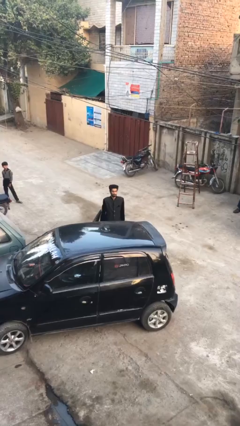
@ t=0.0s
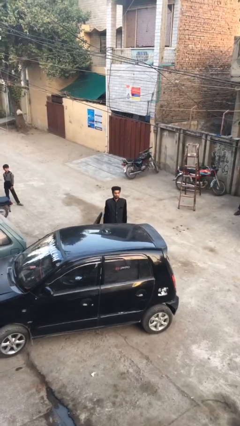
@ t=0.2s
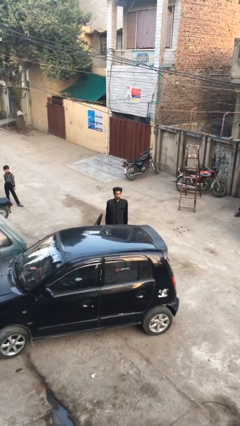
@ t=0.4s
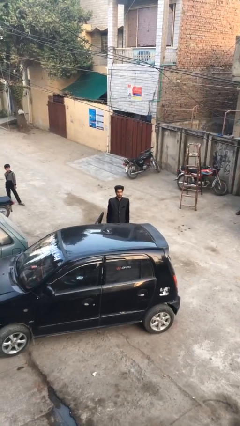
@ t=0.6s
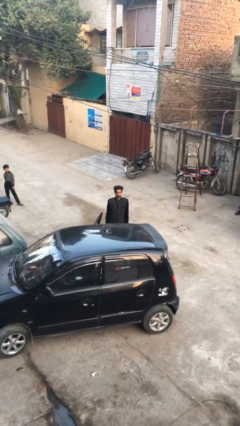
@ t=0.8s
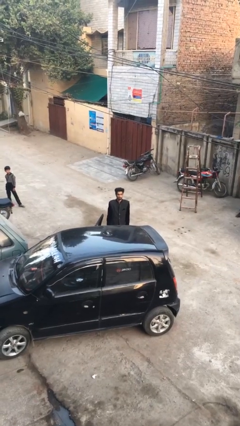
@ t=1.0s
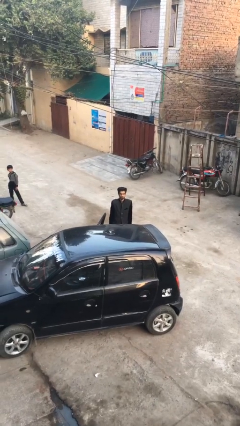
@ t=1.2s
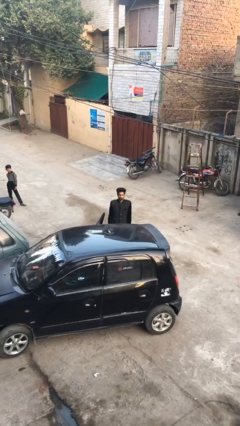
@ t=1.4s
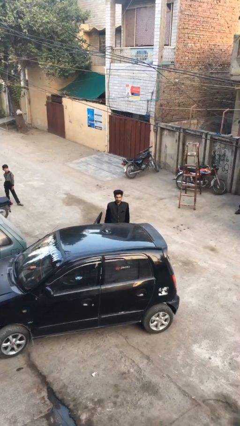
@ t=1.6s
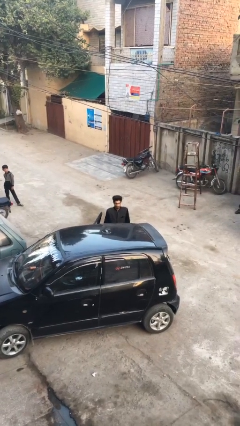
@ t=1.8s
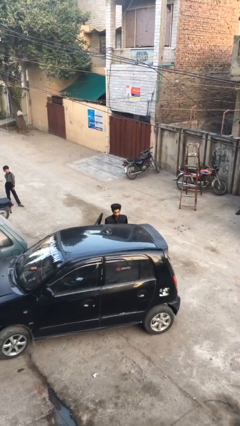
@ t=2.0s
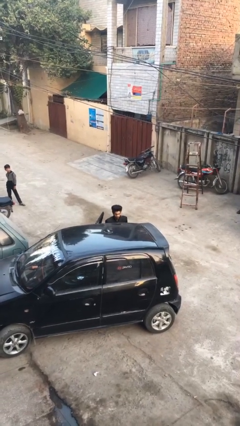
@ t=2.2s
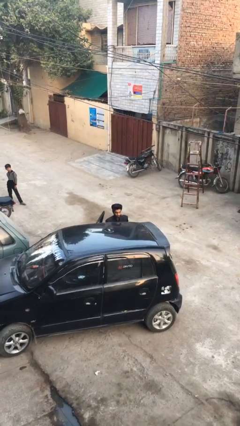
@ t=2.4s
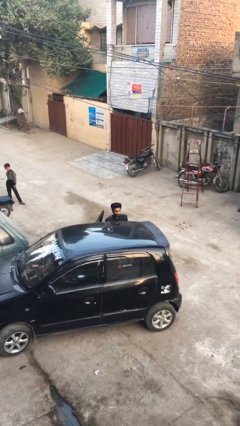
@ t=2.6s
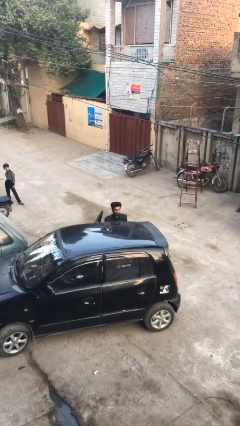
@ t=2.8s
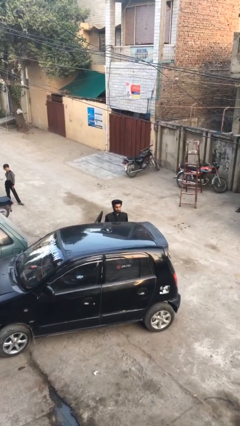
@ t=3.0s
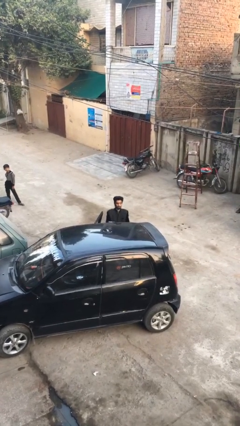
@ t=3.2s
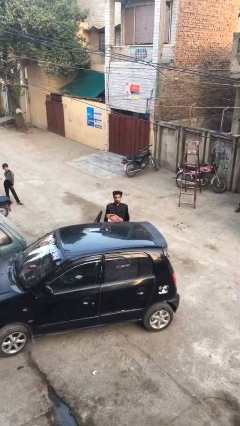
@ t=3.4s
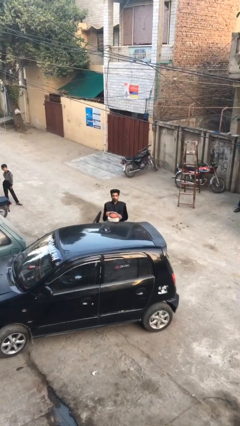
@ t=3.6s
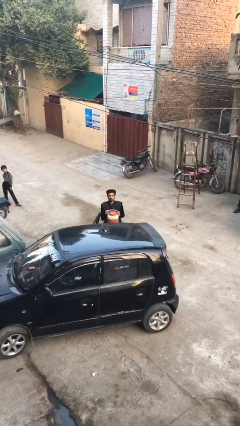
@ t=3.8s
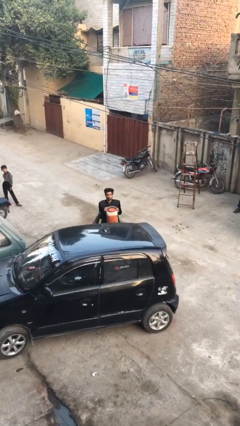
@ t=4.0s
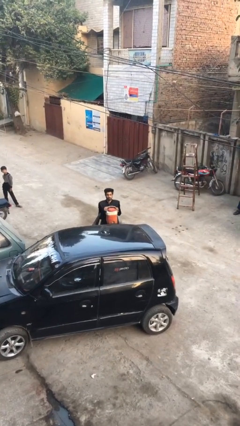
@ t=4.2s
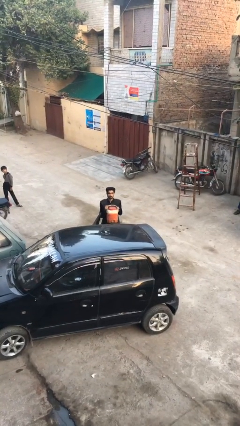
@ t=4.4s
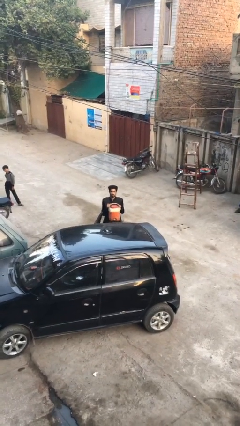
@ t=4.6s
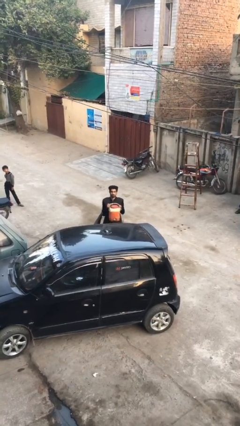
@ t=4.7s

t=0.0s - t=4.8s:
person unloads car

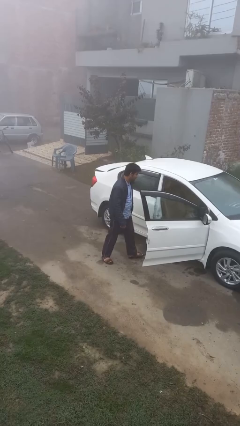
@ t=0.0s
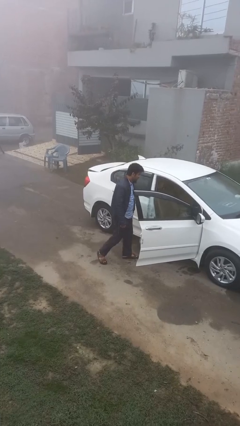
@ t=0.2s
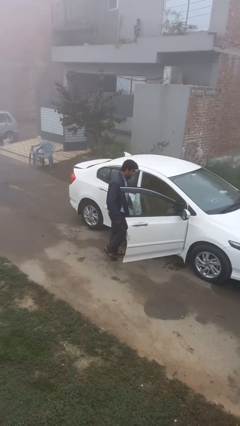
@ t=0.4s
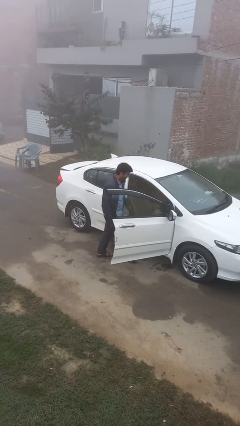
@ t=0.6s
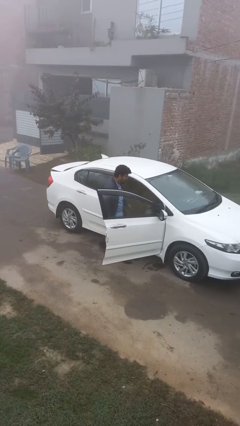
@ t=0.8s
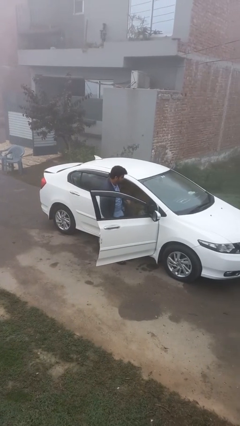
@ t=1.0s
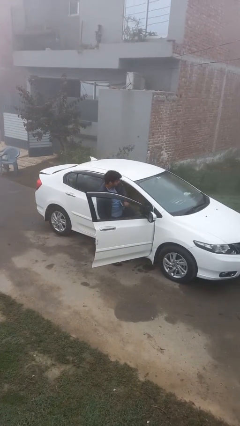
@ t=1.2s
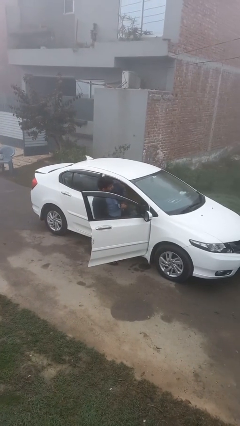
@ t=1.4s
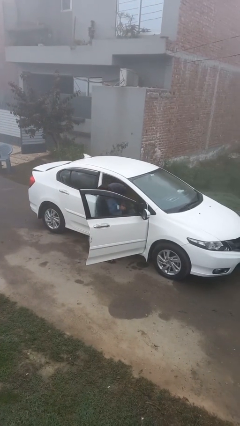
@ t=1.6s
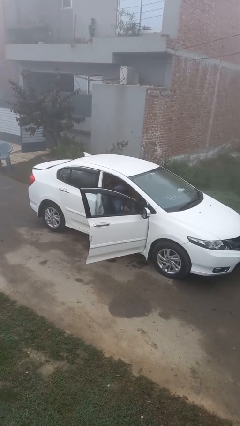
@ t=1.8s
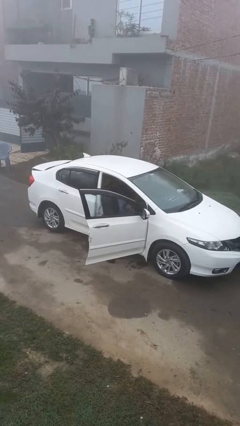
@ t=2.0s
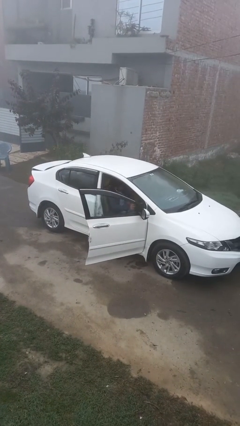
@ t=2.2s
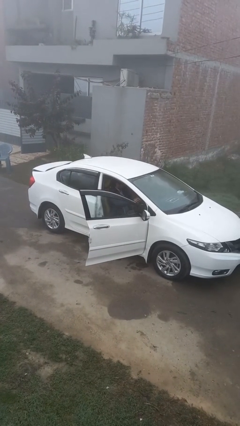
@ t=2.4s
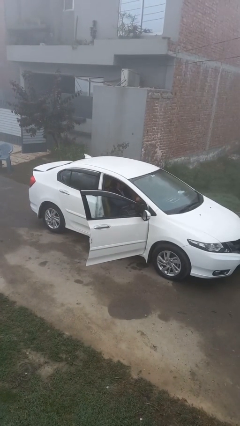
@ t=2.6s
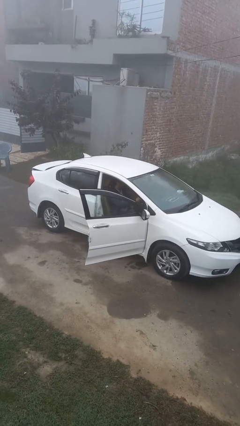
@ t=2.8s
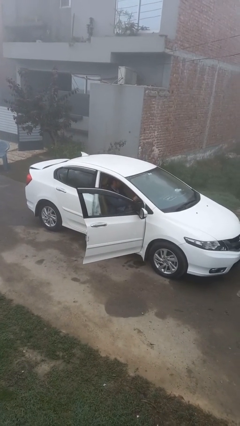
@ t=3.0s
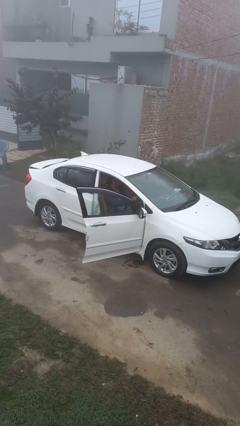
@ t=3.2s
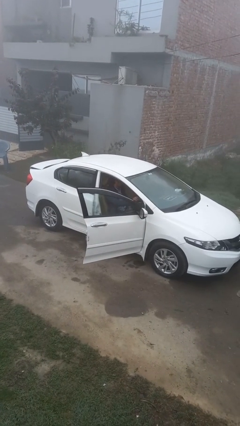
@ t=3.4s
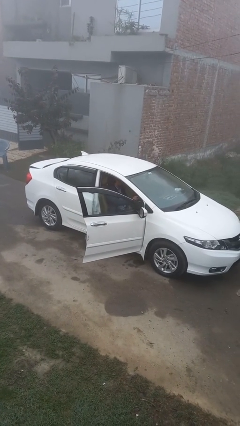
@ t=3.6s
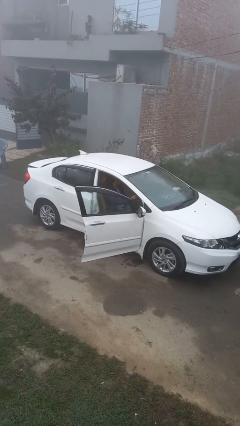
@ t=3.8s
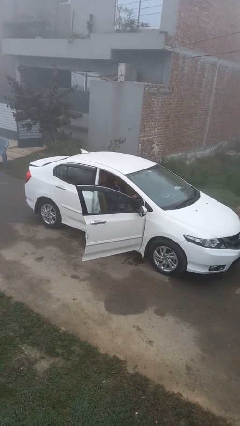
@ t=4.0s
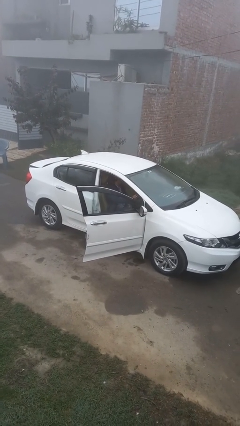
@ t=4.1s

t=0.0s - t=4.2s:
person enters car

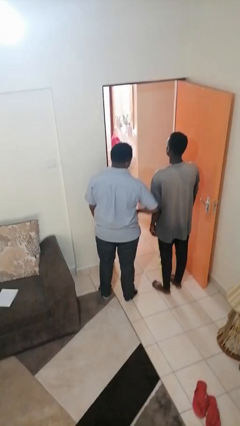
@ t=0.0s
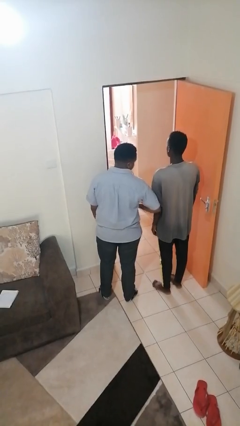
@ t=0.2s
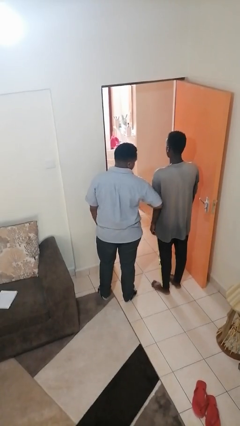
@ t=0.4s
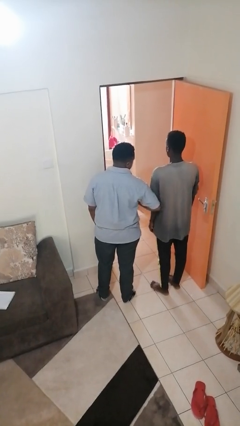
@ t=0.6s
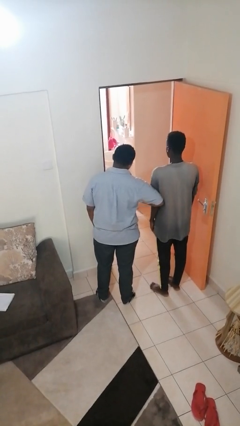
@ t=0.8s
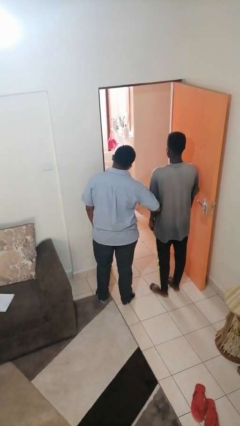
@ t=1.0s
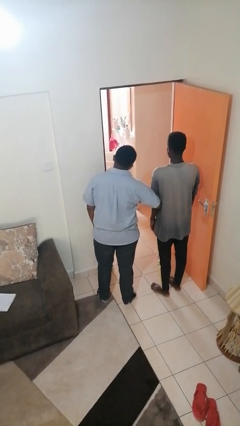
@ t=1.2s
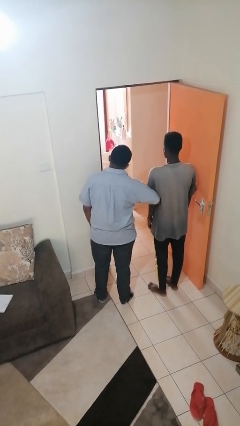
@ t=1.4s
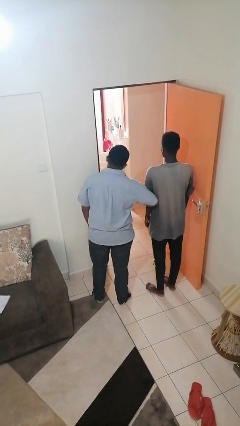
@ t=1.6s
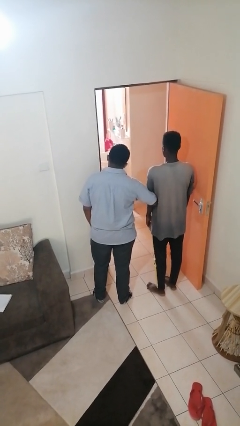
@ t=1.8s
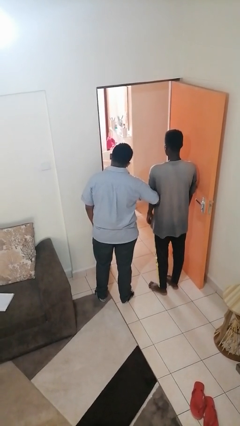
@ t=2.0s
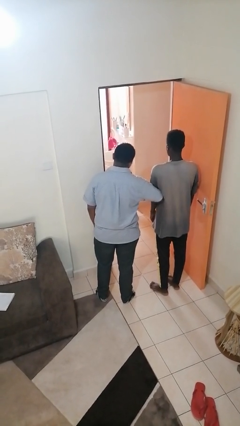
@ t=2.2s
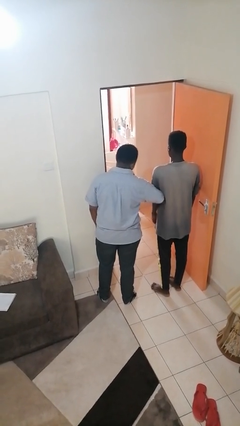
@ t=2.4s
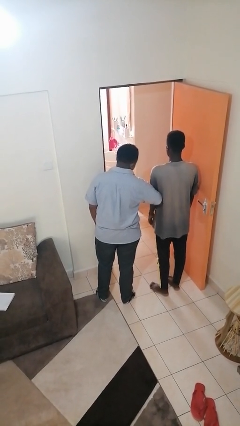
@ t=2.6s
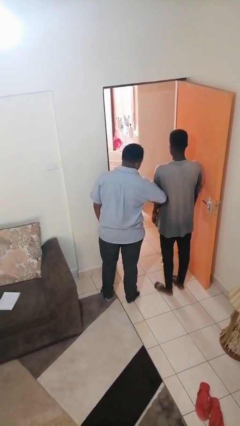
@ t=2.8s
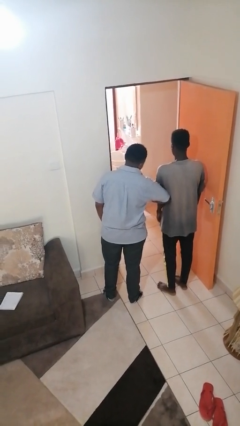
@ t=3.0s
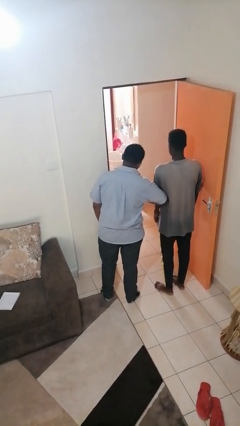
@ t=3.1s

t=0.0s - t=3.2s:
person nudges person with elbow

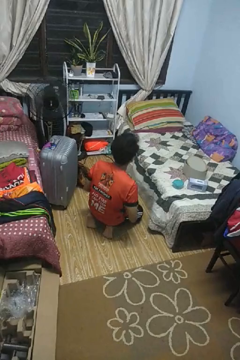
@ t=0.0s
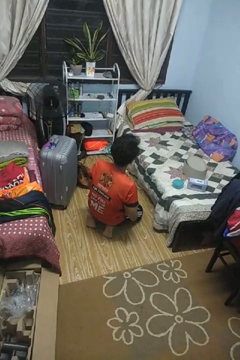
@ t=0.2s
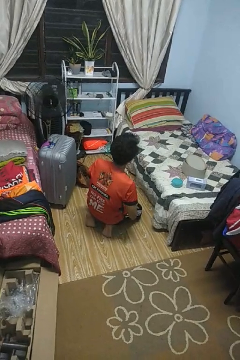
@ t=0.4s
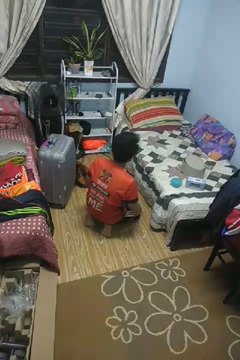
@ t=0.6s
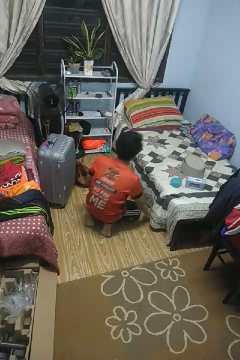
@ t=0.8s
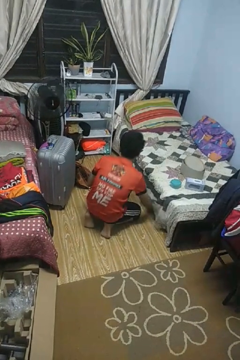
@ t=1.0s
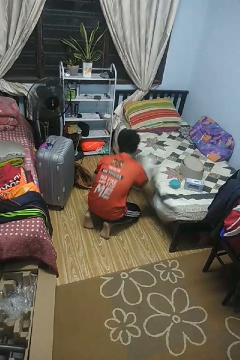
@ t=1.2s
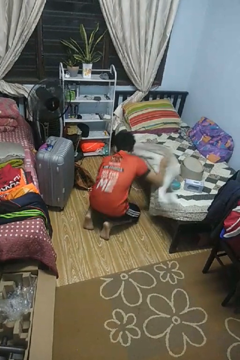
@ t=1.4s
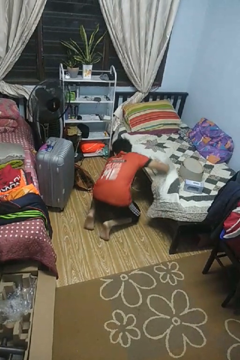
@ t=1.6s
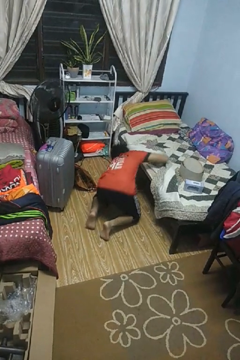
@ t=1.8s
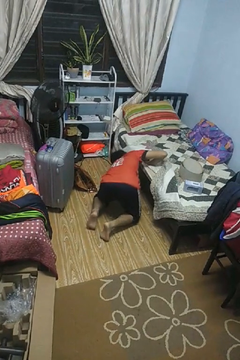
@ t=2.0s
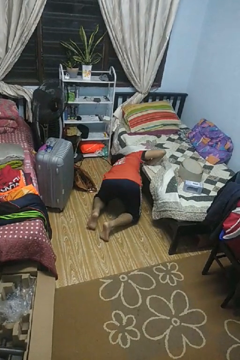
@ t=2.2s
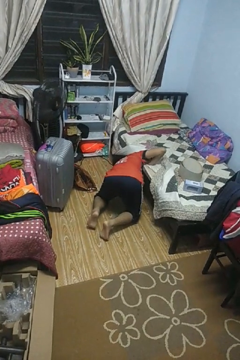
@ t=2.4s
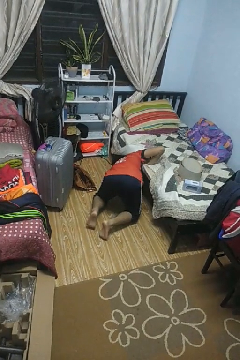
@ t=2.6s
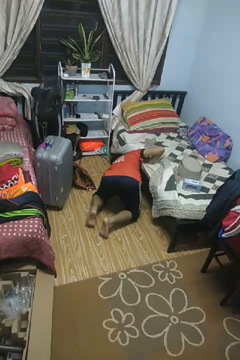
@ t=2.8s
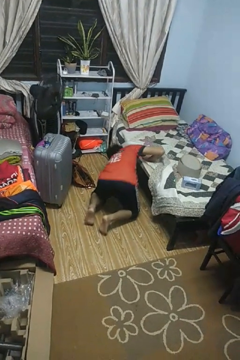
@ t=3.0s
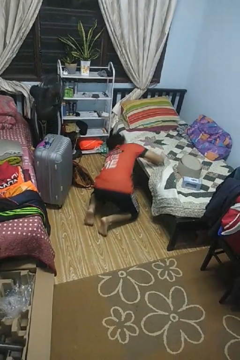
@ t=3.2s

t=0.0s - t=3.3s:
person searches under bed

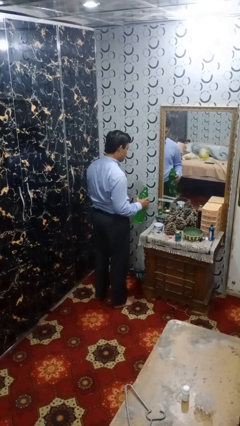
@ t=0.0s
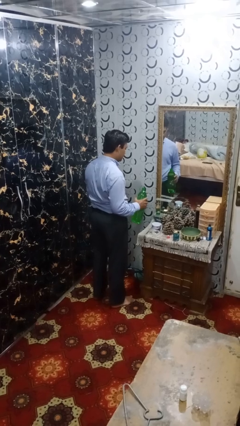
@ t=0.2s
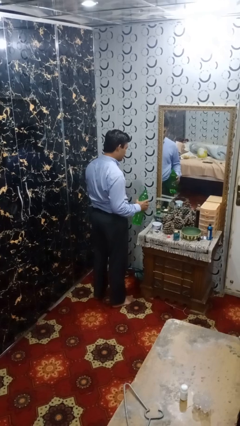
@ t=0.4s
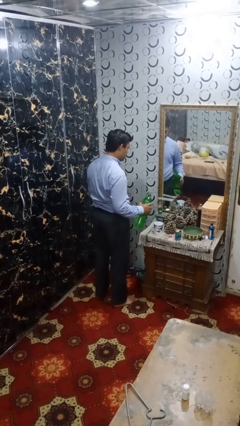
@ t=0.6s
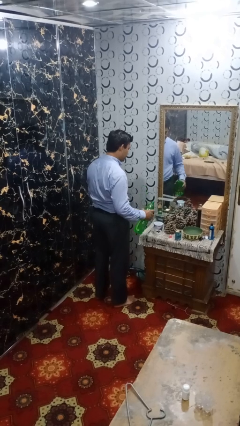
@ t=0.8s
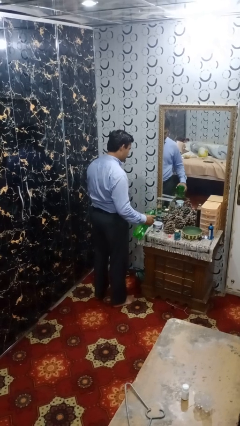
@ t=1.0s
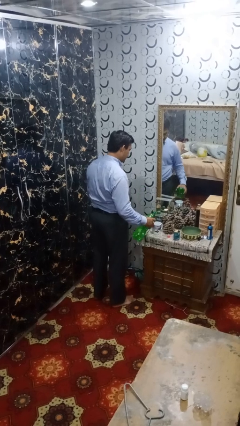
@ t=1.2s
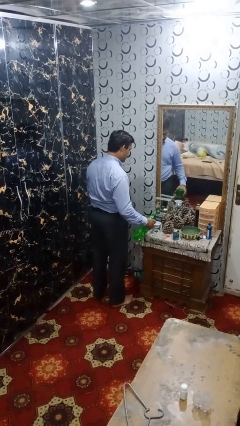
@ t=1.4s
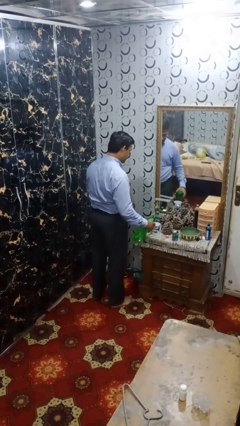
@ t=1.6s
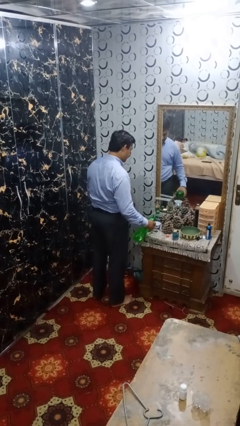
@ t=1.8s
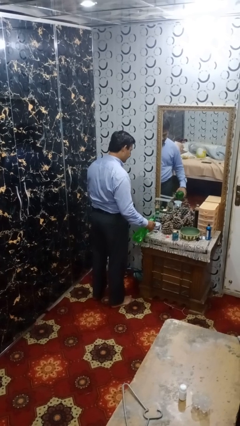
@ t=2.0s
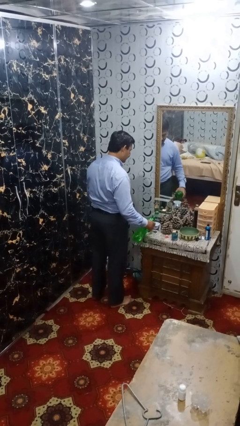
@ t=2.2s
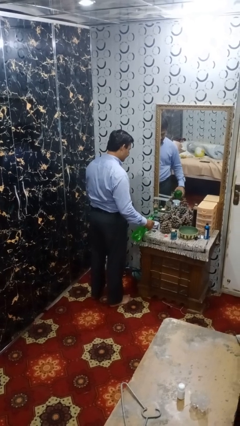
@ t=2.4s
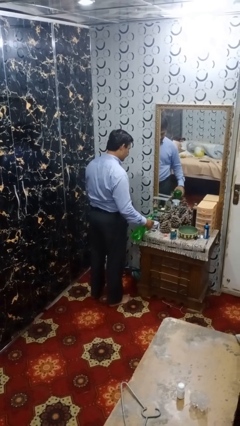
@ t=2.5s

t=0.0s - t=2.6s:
person pours liquid into cup
